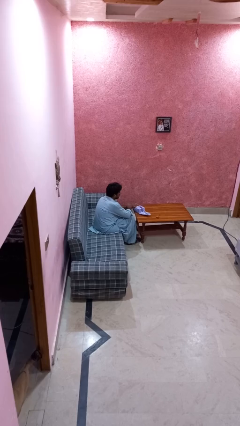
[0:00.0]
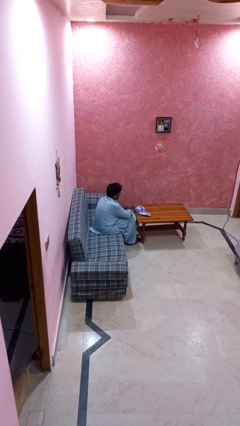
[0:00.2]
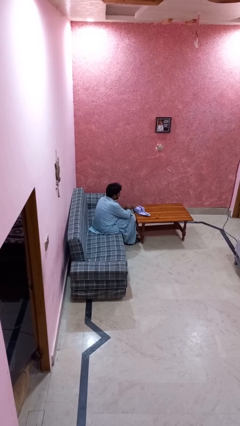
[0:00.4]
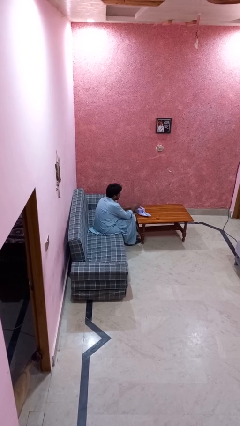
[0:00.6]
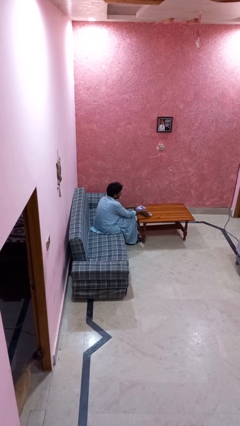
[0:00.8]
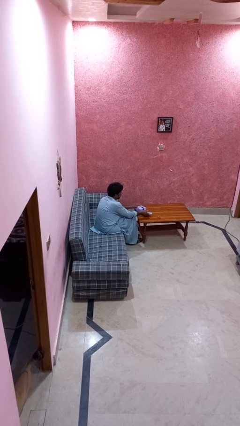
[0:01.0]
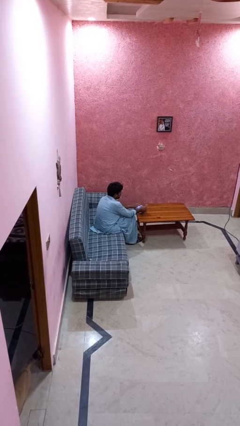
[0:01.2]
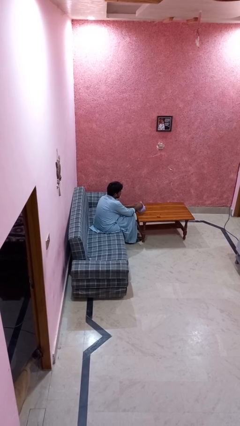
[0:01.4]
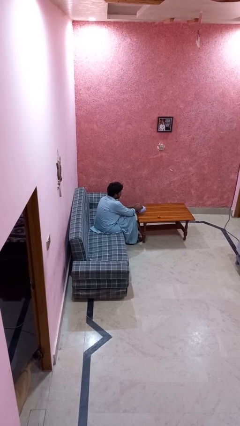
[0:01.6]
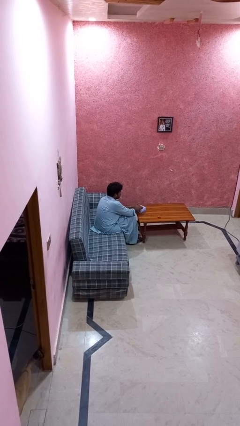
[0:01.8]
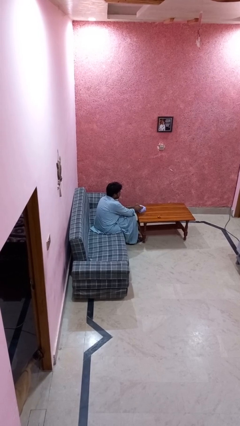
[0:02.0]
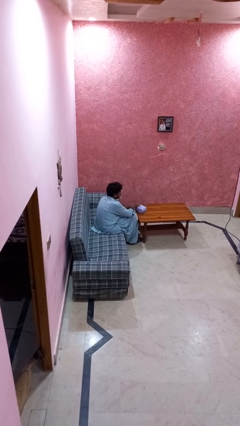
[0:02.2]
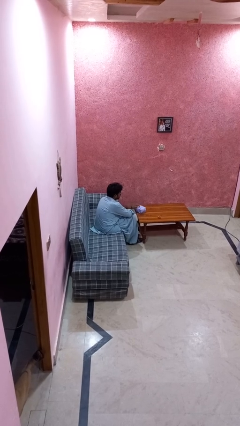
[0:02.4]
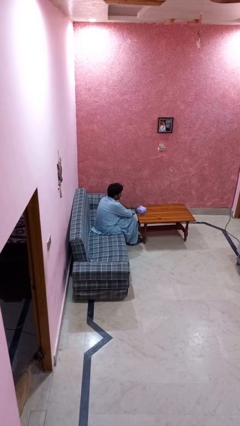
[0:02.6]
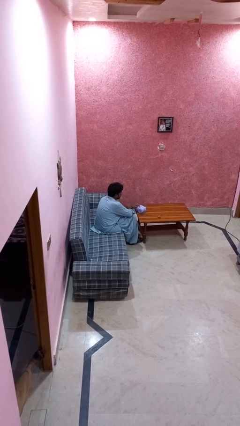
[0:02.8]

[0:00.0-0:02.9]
person wraps box

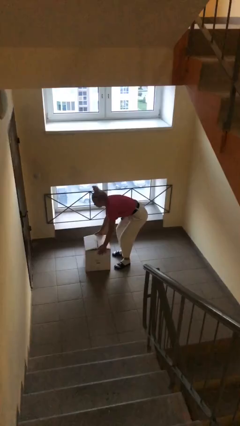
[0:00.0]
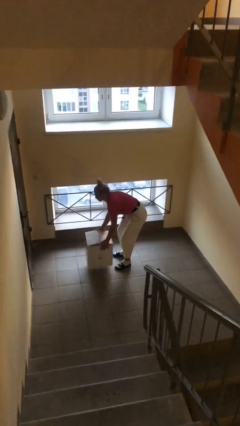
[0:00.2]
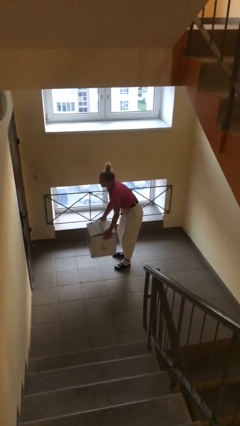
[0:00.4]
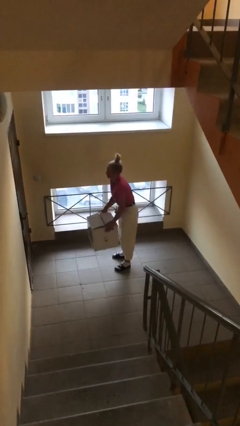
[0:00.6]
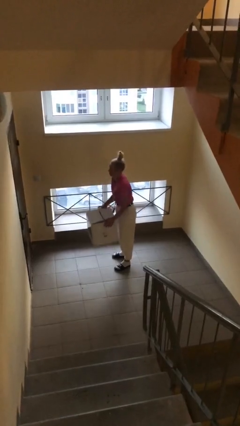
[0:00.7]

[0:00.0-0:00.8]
person picks up object from floor

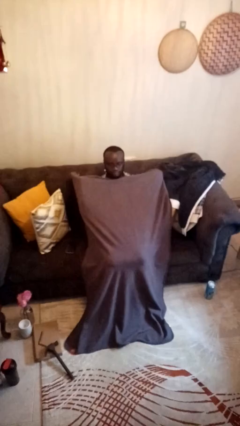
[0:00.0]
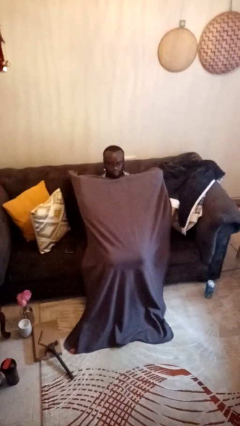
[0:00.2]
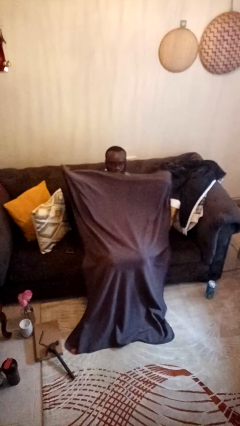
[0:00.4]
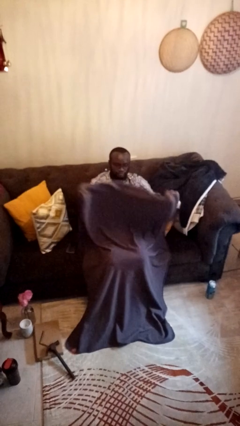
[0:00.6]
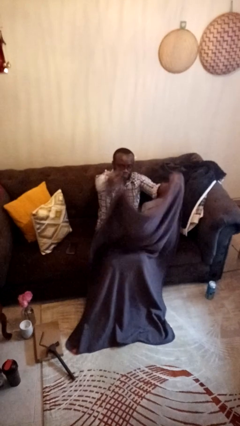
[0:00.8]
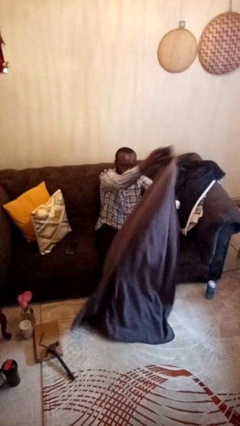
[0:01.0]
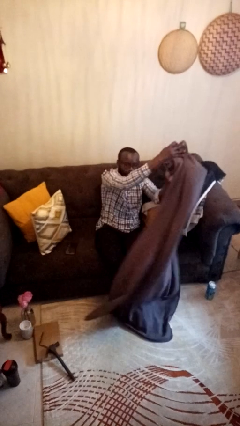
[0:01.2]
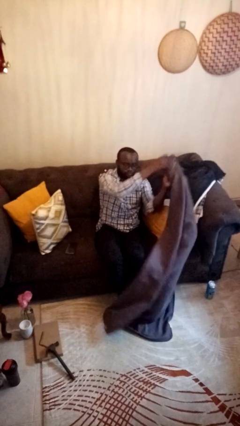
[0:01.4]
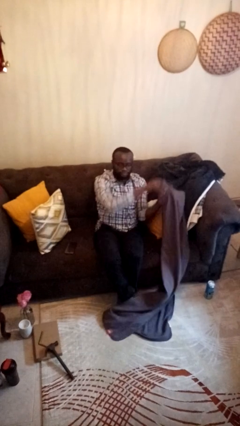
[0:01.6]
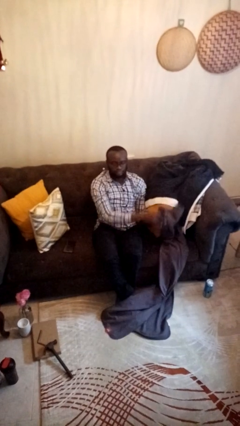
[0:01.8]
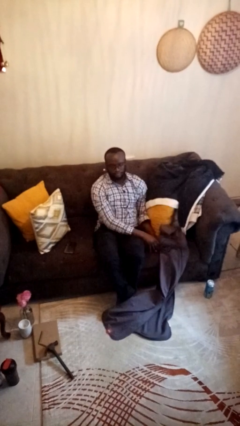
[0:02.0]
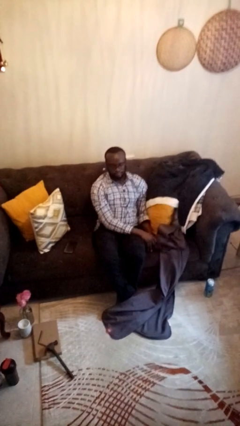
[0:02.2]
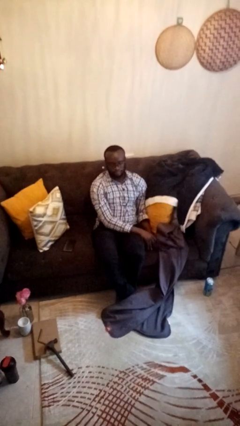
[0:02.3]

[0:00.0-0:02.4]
person uncovers with blanket

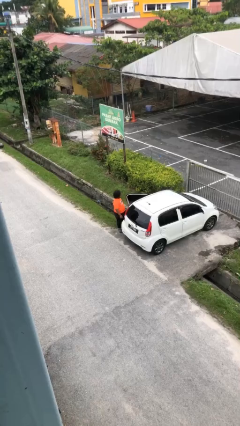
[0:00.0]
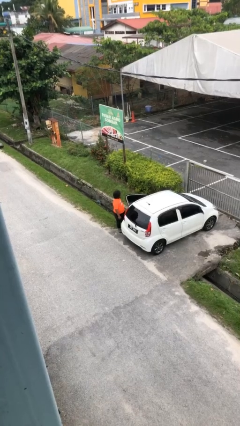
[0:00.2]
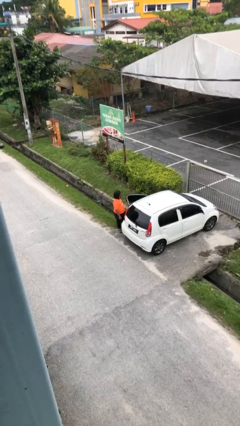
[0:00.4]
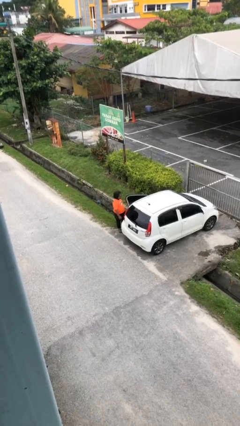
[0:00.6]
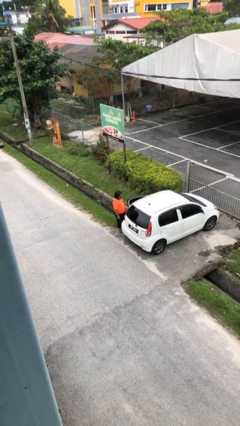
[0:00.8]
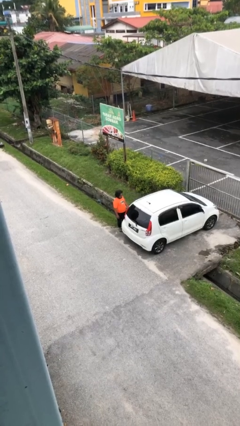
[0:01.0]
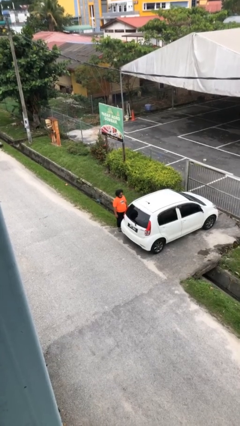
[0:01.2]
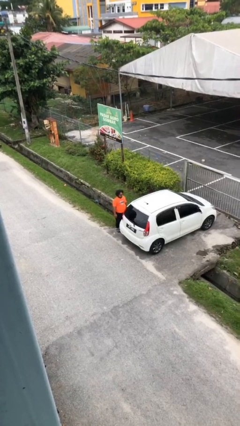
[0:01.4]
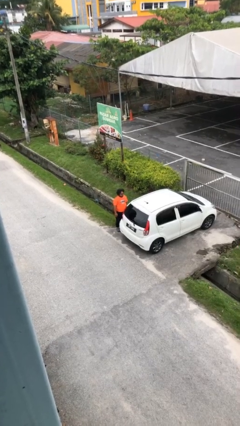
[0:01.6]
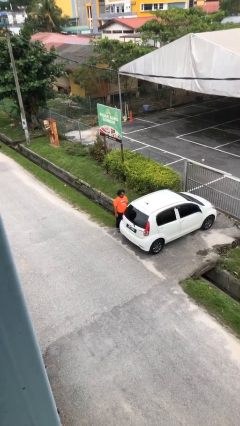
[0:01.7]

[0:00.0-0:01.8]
person closes car door

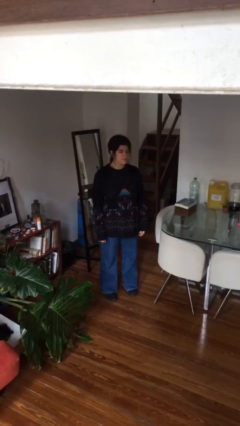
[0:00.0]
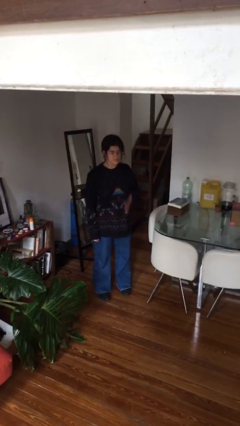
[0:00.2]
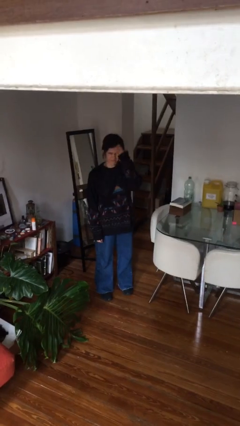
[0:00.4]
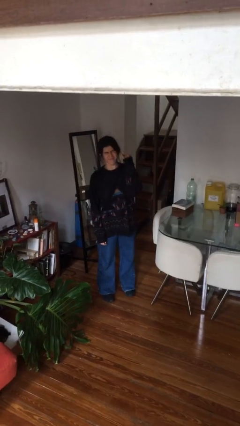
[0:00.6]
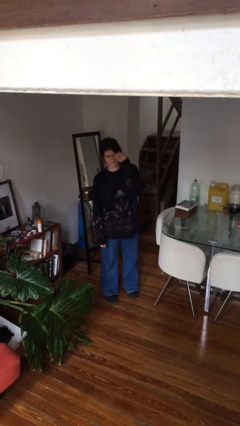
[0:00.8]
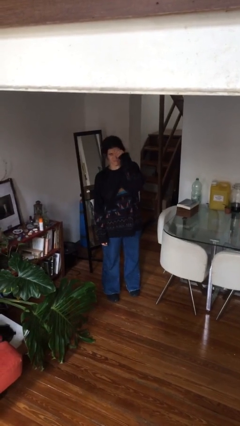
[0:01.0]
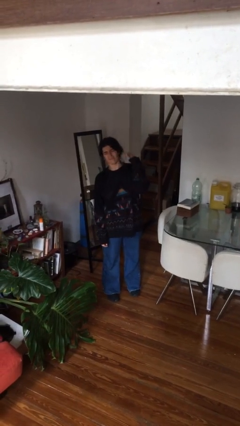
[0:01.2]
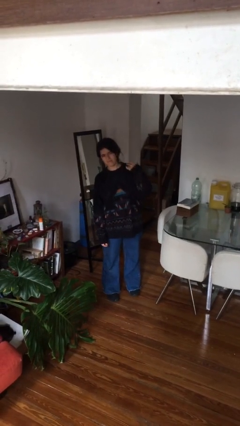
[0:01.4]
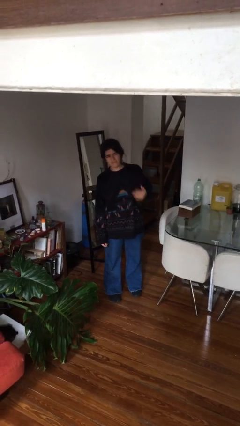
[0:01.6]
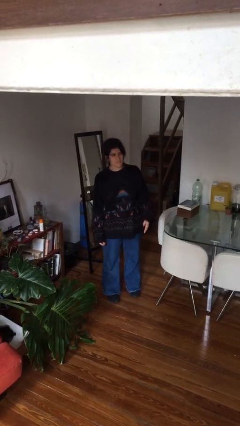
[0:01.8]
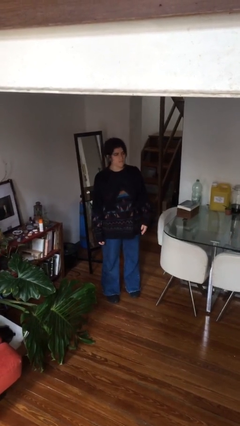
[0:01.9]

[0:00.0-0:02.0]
person swats bug

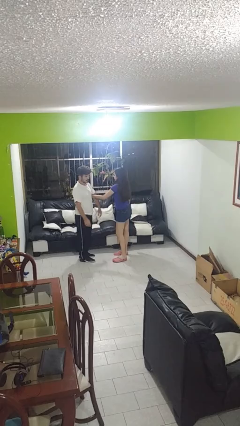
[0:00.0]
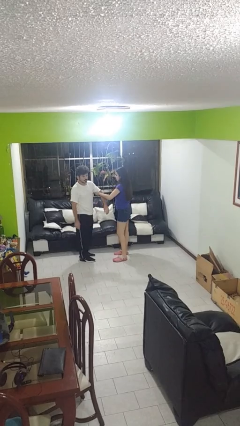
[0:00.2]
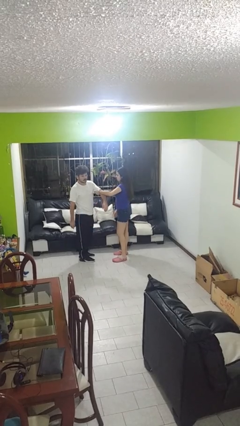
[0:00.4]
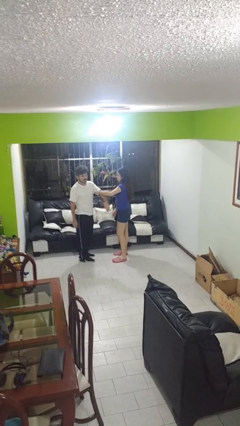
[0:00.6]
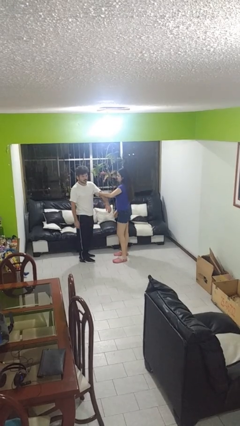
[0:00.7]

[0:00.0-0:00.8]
person grabs person by bicep

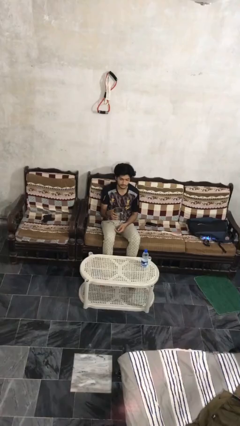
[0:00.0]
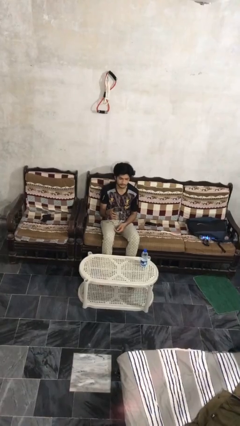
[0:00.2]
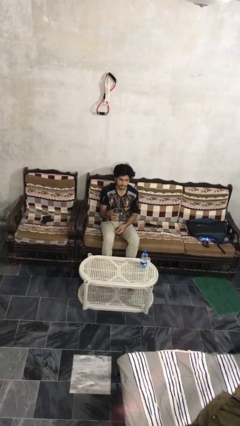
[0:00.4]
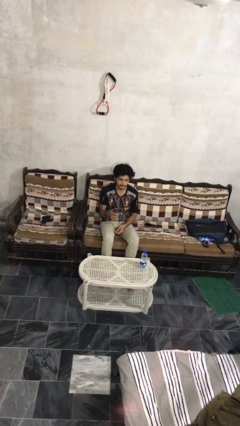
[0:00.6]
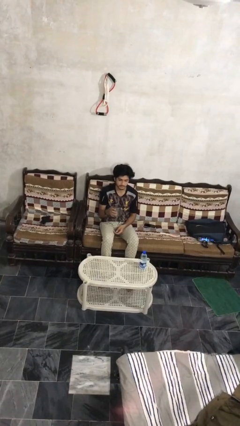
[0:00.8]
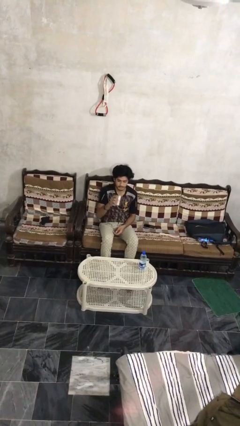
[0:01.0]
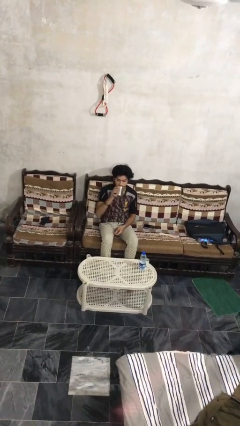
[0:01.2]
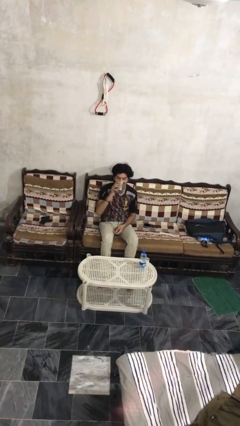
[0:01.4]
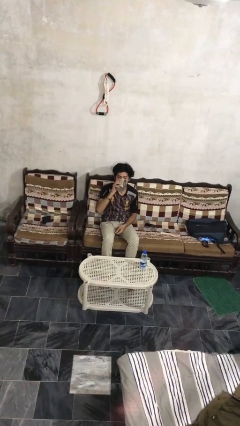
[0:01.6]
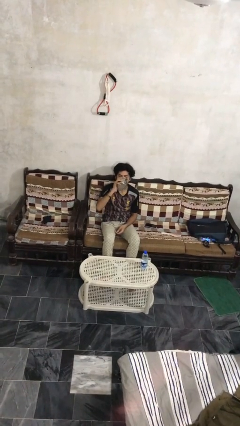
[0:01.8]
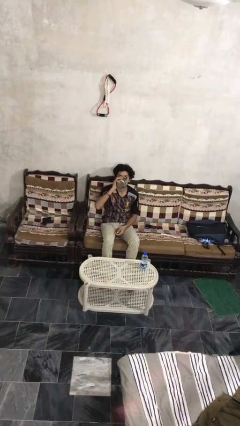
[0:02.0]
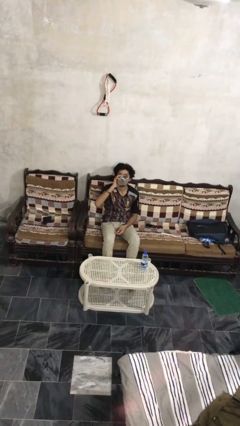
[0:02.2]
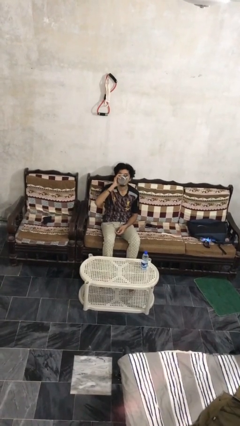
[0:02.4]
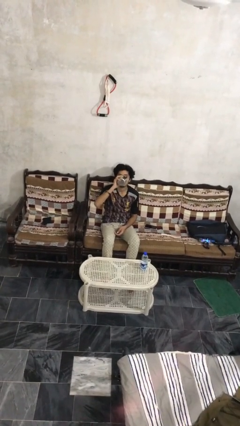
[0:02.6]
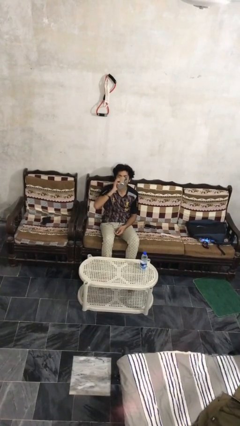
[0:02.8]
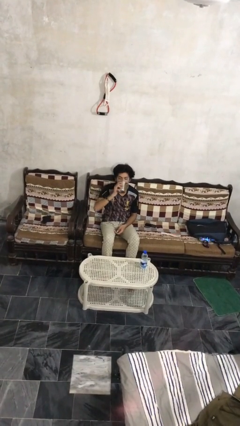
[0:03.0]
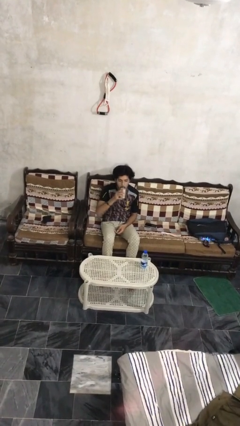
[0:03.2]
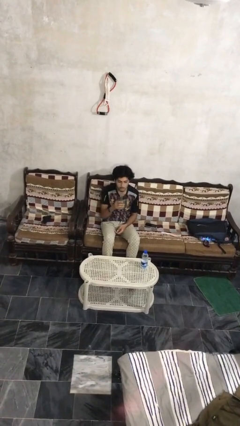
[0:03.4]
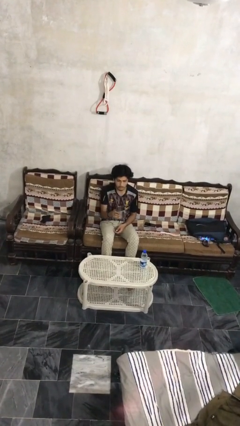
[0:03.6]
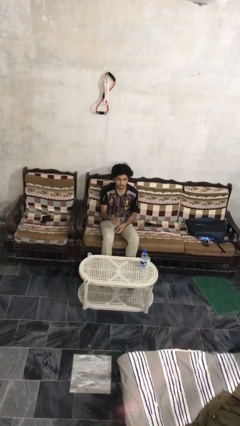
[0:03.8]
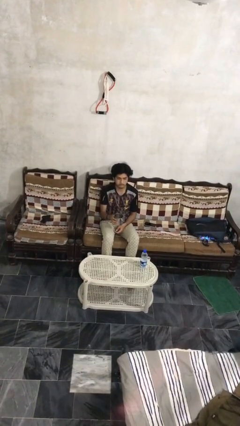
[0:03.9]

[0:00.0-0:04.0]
person drinks from mug

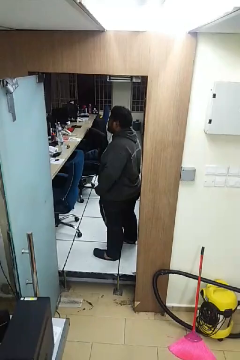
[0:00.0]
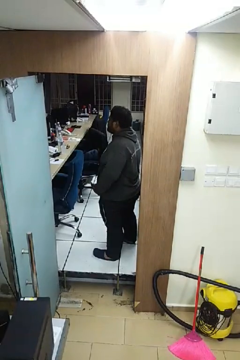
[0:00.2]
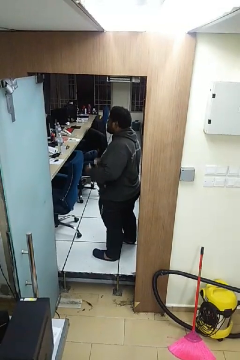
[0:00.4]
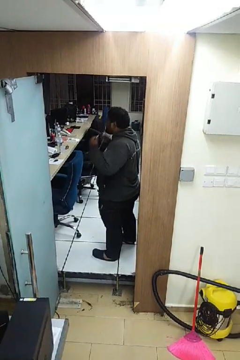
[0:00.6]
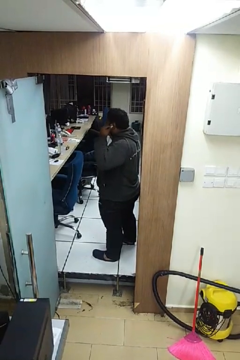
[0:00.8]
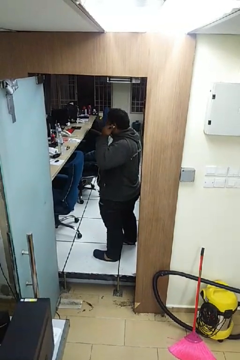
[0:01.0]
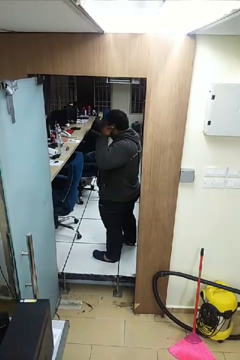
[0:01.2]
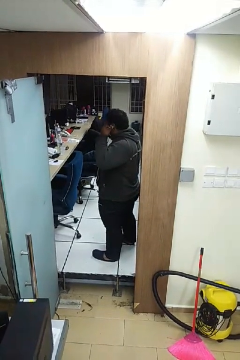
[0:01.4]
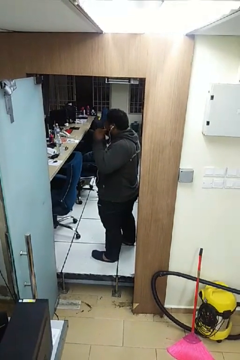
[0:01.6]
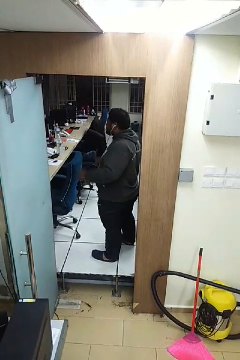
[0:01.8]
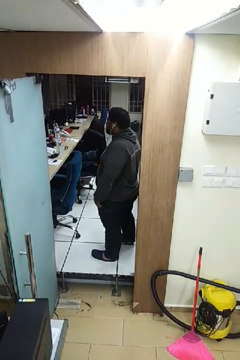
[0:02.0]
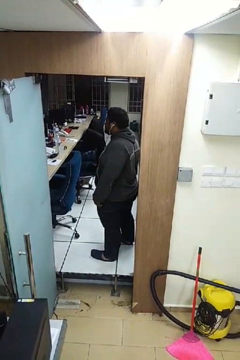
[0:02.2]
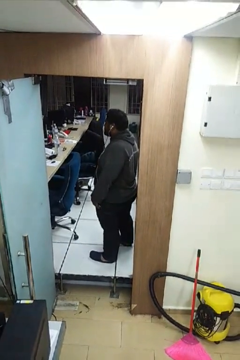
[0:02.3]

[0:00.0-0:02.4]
person puts on headphones

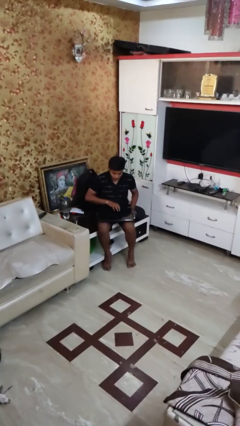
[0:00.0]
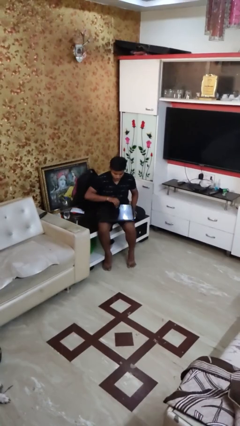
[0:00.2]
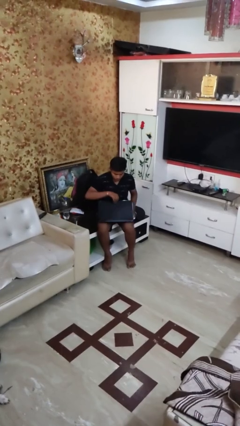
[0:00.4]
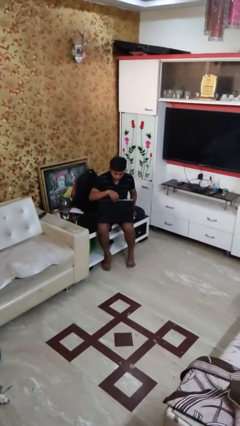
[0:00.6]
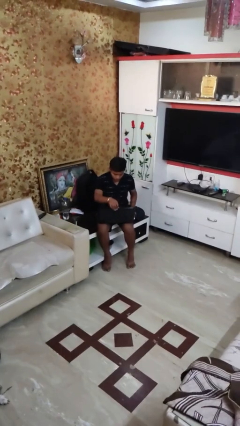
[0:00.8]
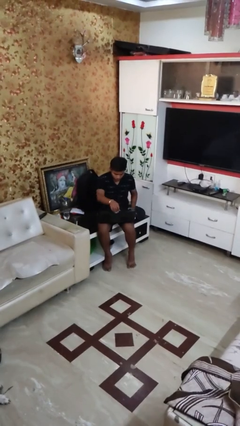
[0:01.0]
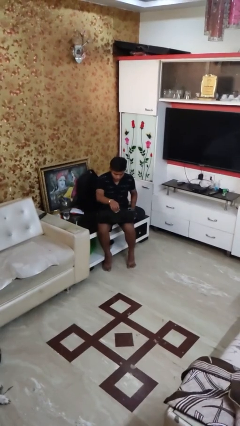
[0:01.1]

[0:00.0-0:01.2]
person opens laptop
